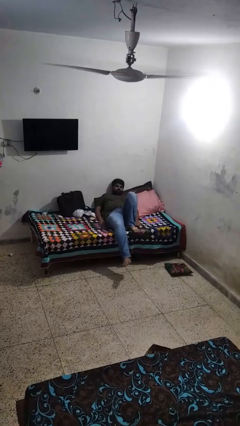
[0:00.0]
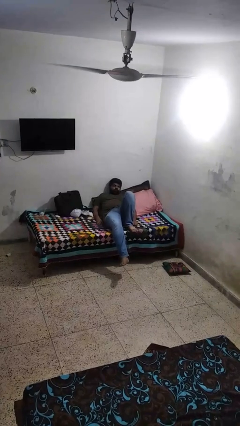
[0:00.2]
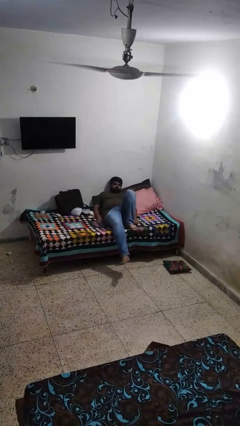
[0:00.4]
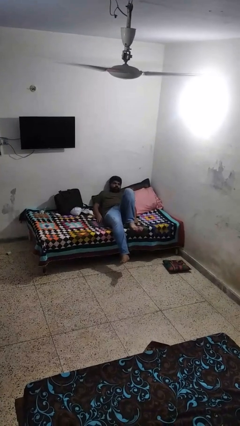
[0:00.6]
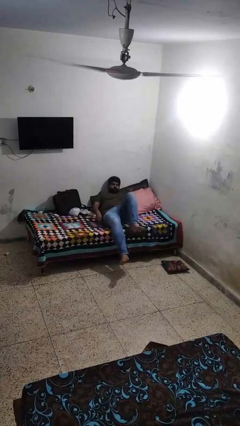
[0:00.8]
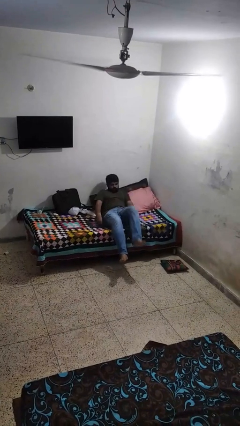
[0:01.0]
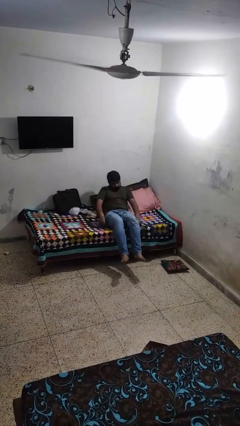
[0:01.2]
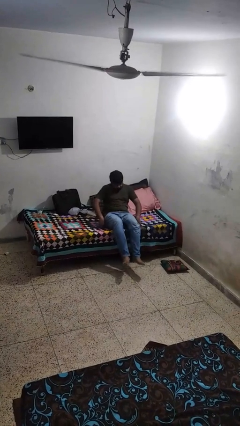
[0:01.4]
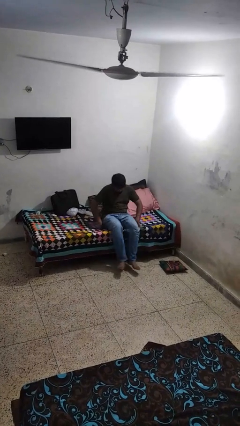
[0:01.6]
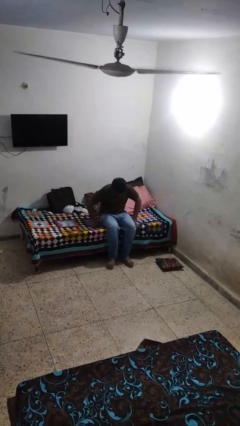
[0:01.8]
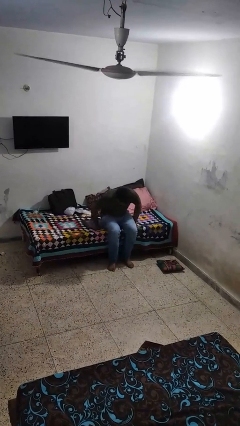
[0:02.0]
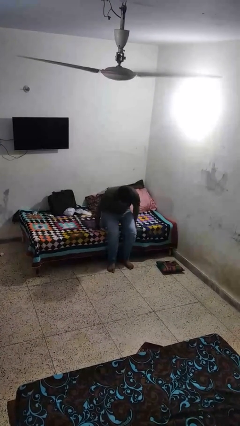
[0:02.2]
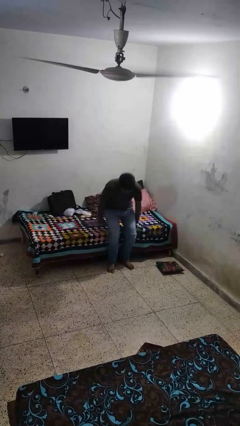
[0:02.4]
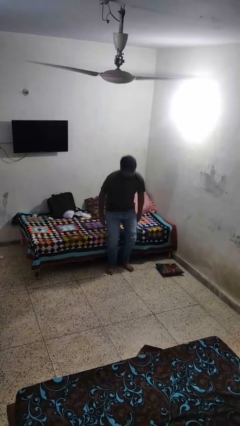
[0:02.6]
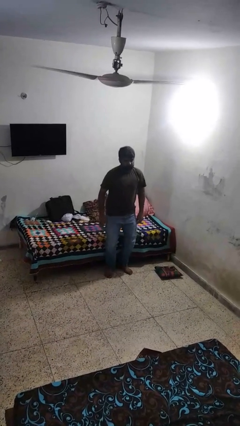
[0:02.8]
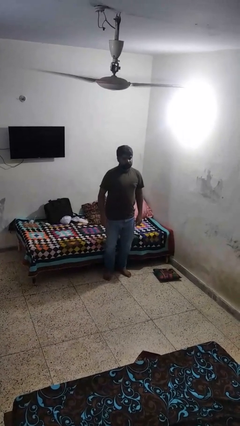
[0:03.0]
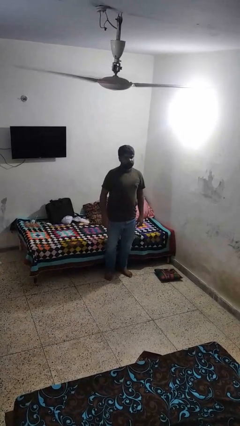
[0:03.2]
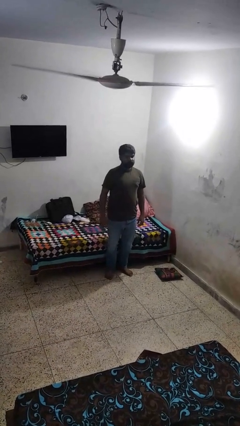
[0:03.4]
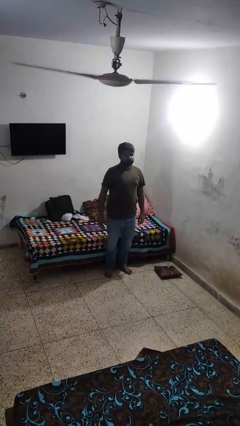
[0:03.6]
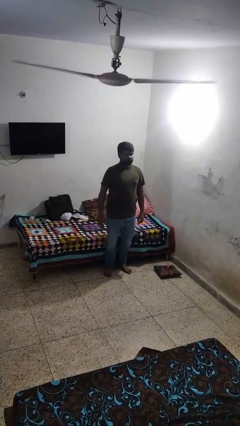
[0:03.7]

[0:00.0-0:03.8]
person stands up

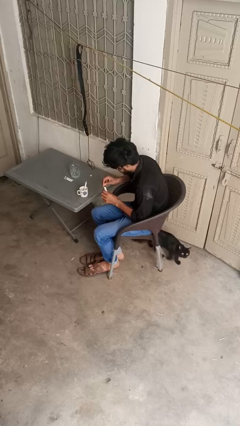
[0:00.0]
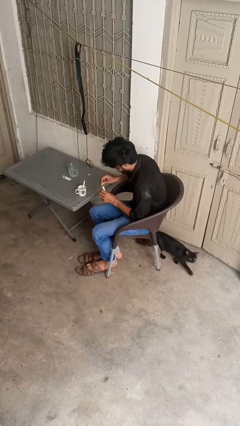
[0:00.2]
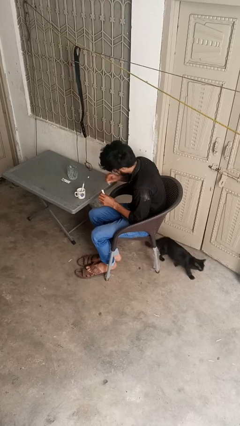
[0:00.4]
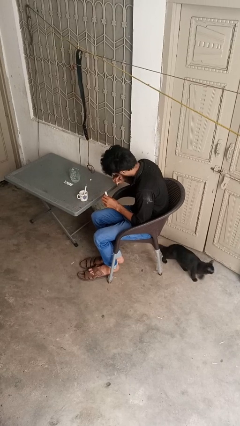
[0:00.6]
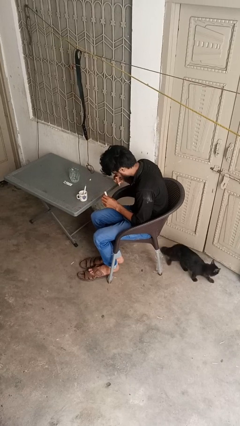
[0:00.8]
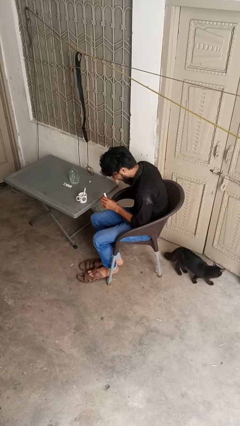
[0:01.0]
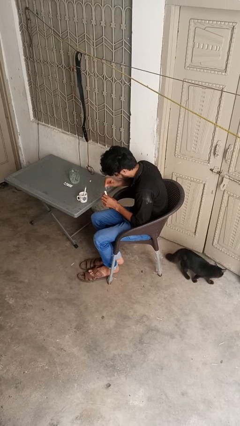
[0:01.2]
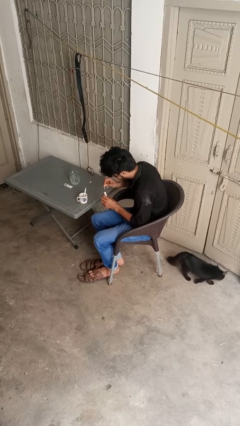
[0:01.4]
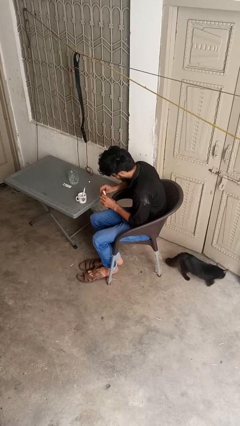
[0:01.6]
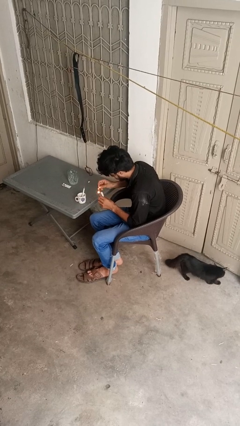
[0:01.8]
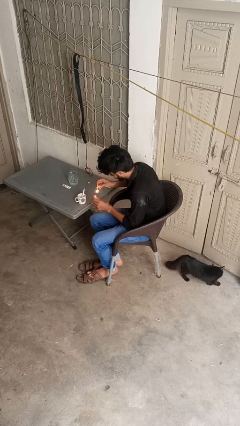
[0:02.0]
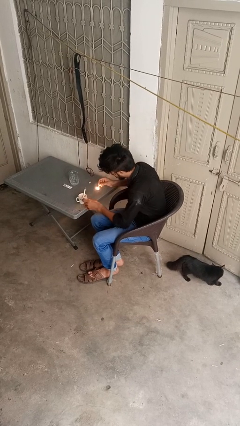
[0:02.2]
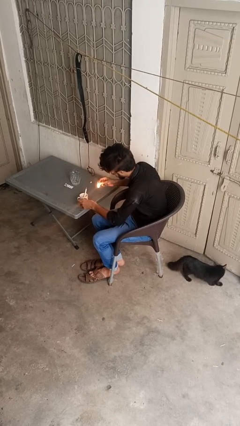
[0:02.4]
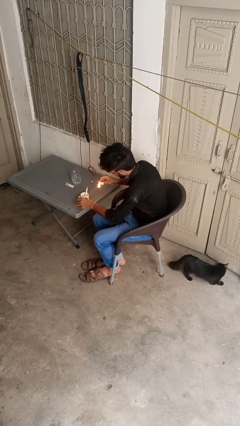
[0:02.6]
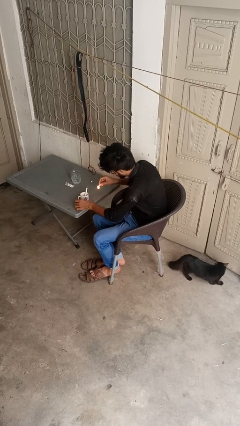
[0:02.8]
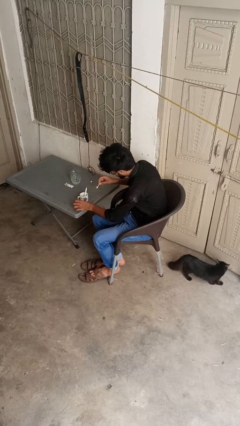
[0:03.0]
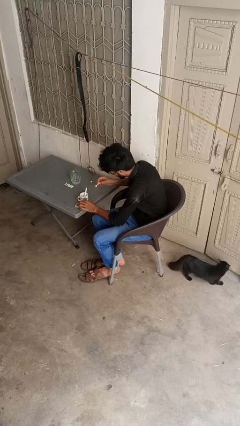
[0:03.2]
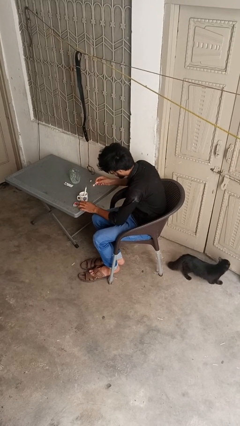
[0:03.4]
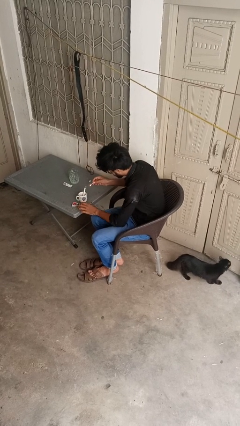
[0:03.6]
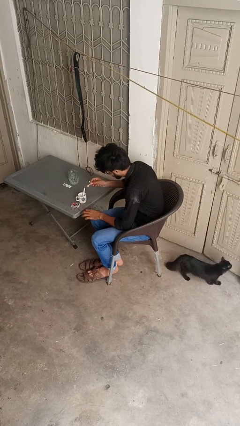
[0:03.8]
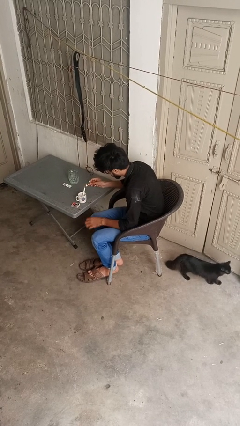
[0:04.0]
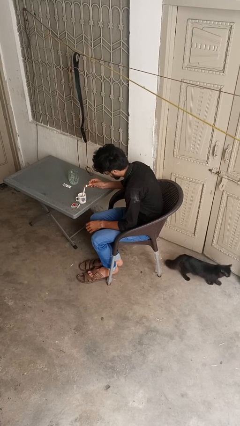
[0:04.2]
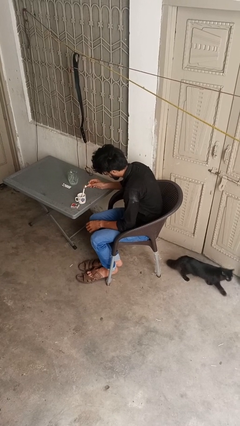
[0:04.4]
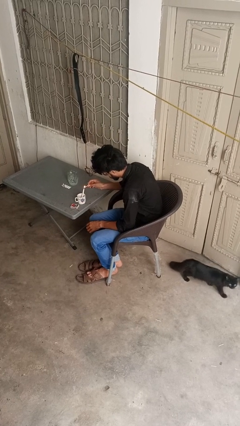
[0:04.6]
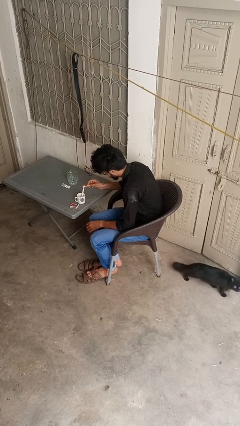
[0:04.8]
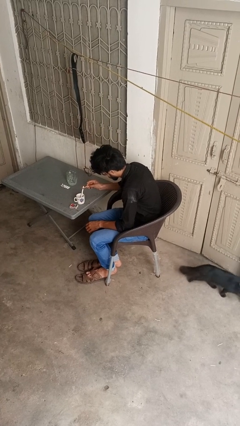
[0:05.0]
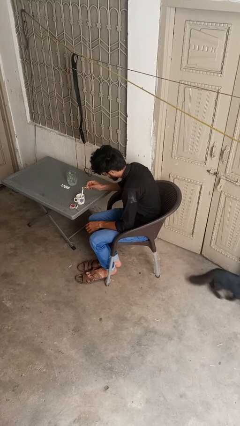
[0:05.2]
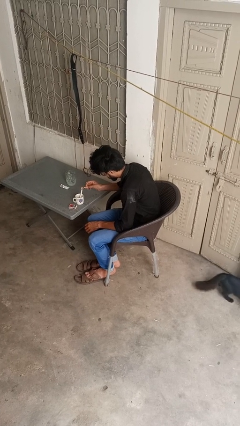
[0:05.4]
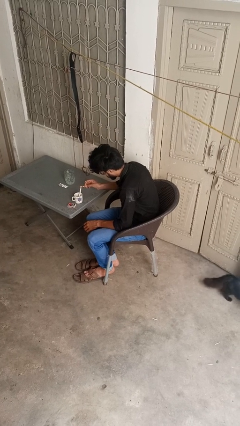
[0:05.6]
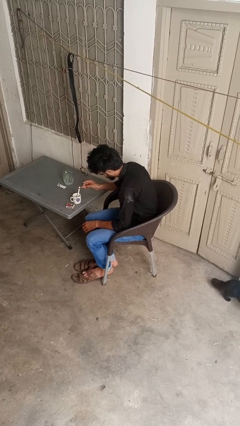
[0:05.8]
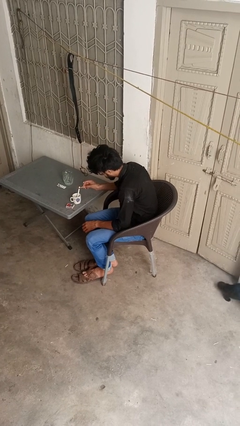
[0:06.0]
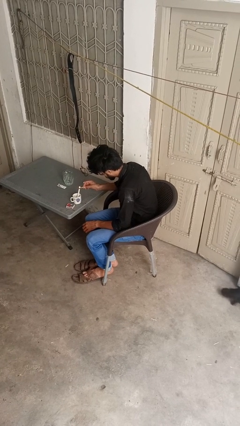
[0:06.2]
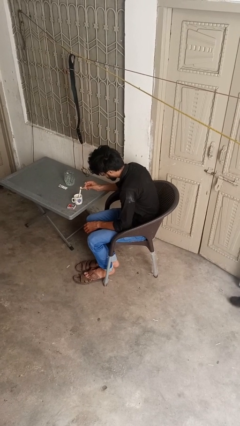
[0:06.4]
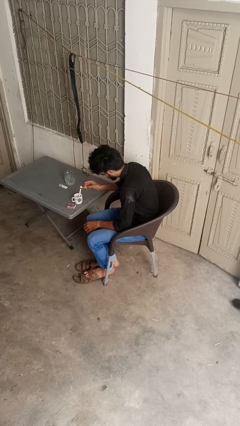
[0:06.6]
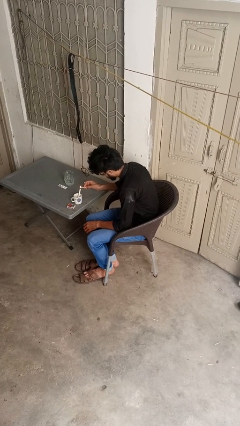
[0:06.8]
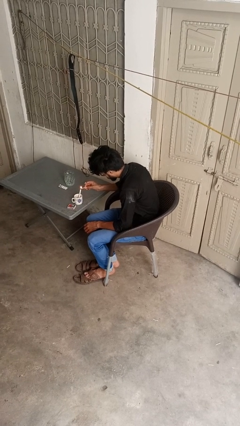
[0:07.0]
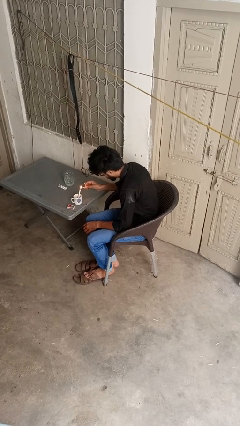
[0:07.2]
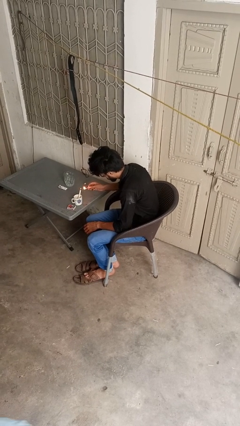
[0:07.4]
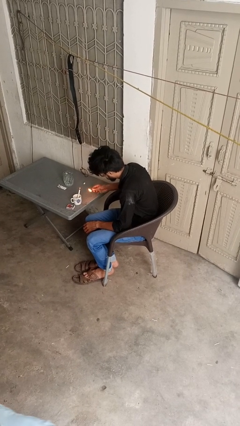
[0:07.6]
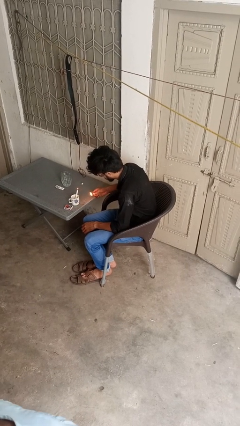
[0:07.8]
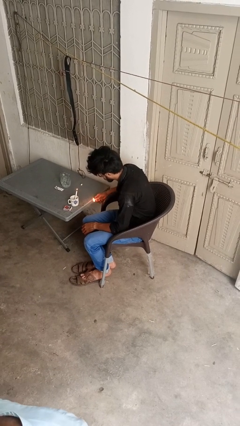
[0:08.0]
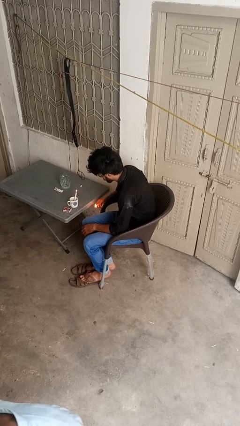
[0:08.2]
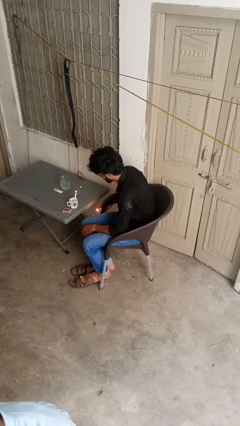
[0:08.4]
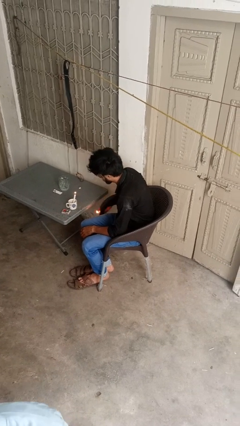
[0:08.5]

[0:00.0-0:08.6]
person lights candle

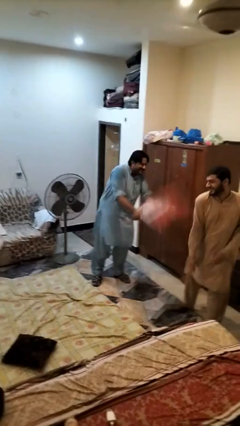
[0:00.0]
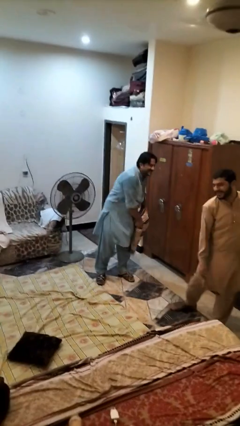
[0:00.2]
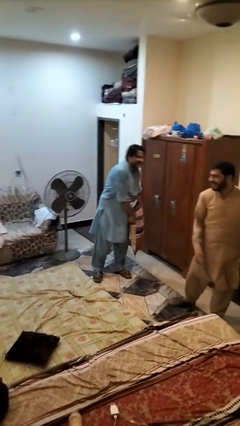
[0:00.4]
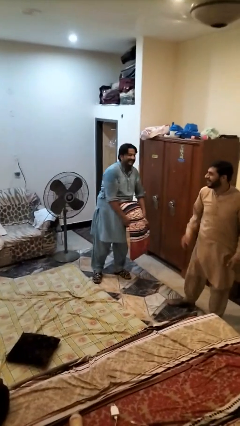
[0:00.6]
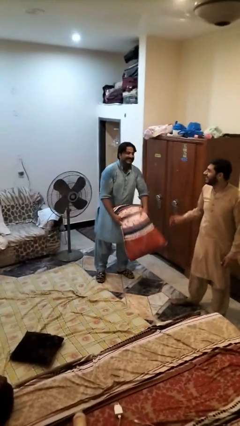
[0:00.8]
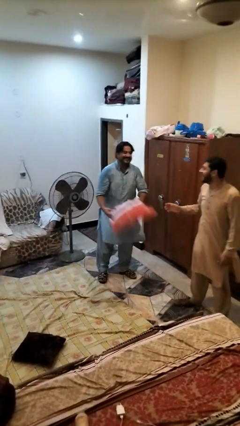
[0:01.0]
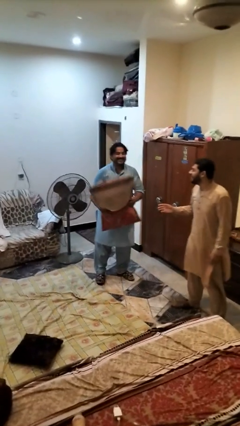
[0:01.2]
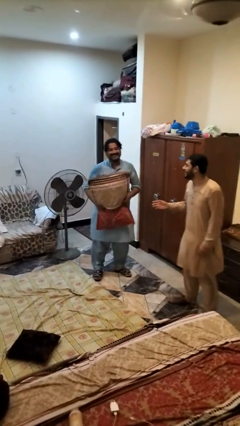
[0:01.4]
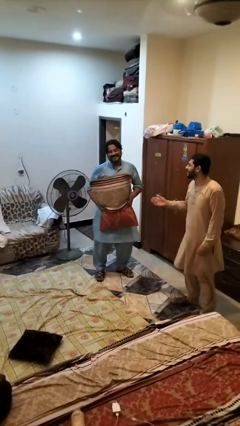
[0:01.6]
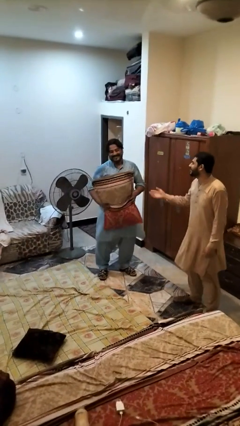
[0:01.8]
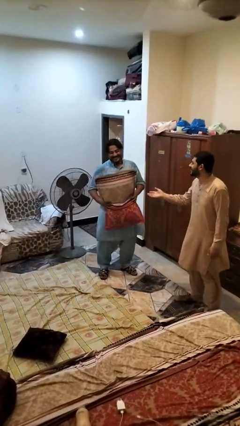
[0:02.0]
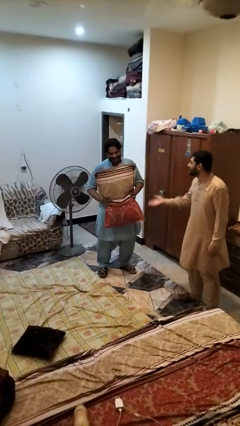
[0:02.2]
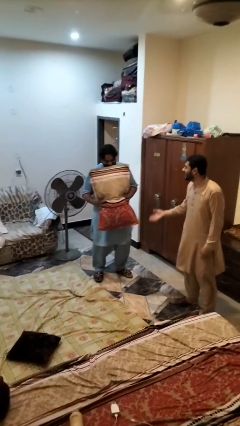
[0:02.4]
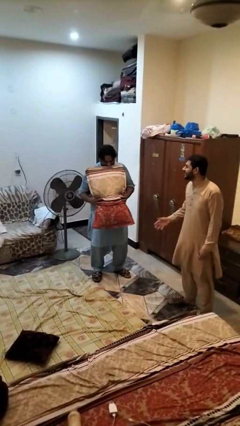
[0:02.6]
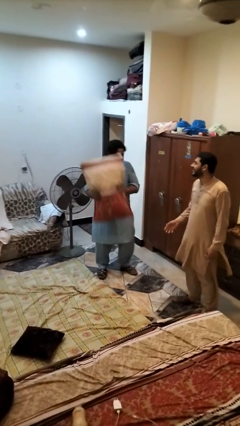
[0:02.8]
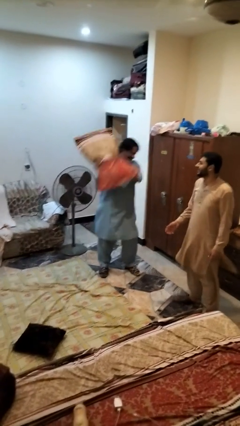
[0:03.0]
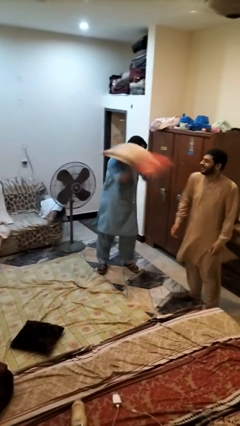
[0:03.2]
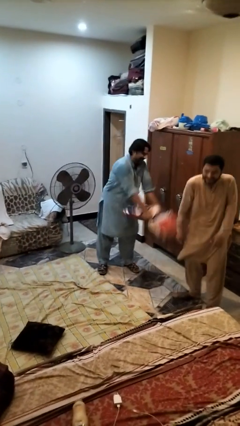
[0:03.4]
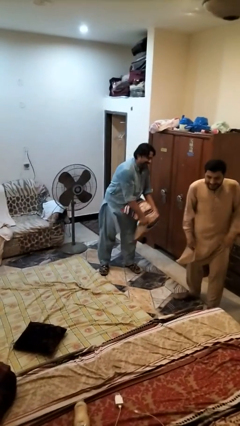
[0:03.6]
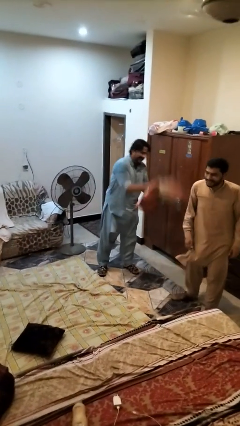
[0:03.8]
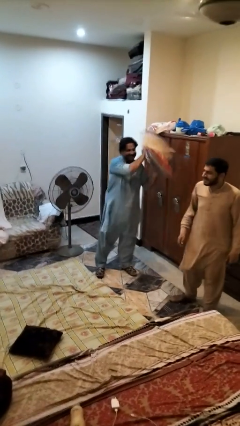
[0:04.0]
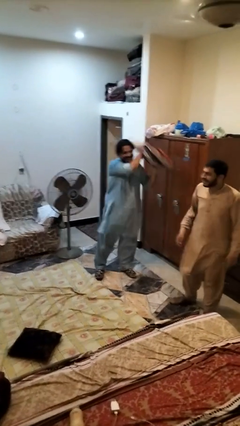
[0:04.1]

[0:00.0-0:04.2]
person hits person with pillow

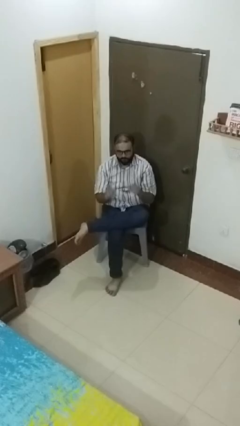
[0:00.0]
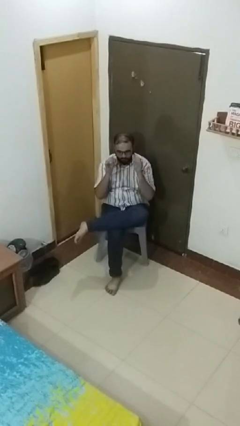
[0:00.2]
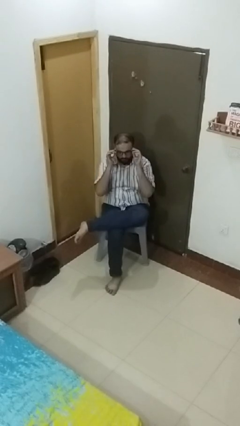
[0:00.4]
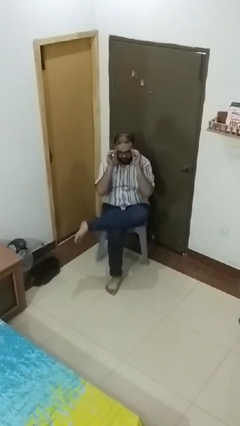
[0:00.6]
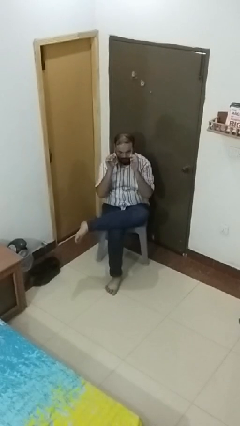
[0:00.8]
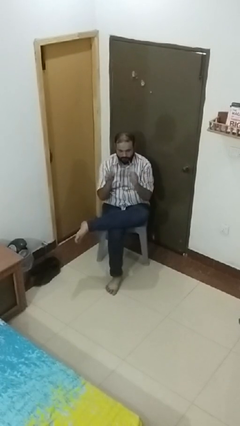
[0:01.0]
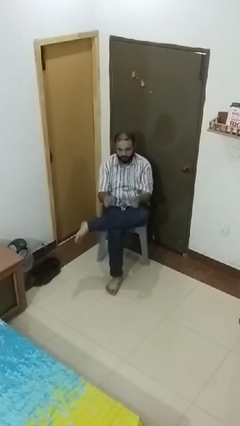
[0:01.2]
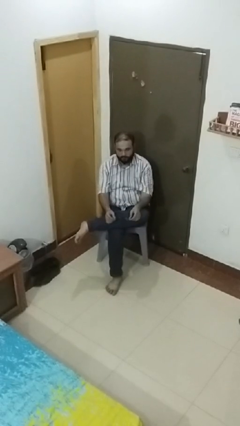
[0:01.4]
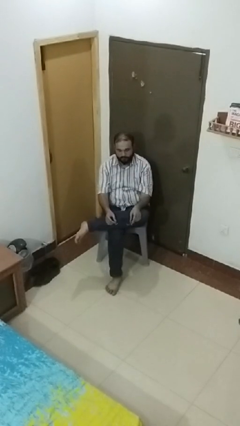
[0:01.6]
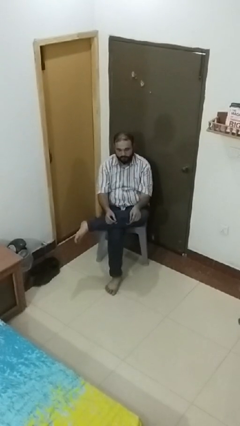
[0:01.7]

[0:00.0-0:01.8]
person takes off glasses
